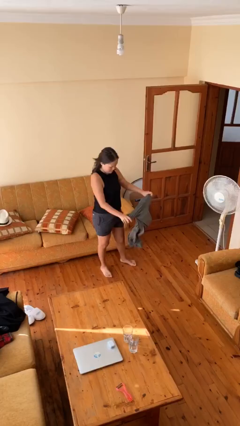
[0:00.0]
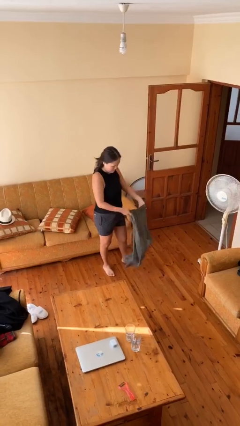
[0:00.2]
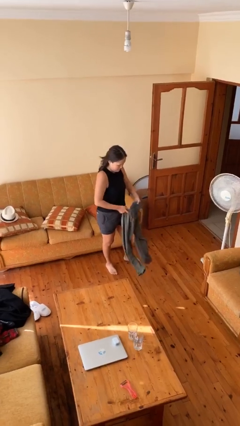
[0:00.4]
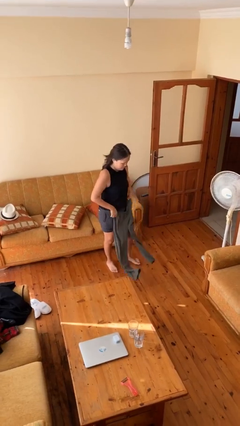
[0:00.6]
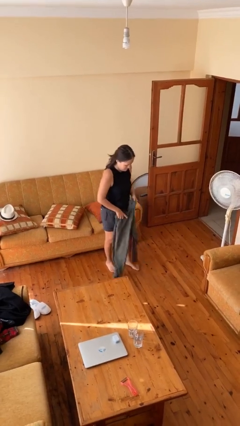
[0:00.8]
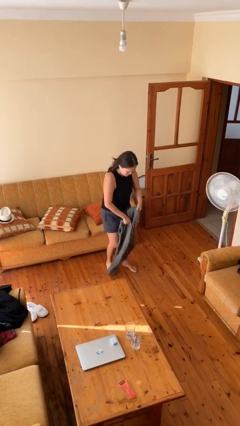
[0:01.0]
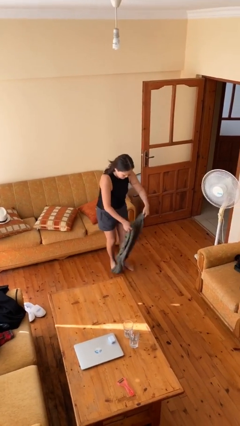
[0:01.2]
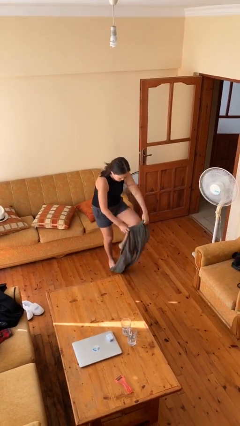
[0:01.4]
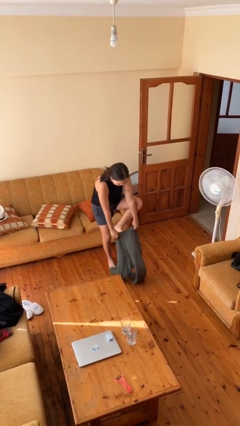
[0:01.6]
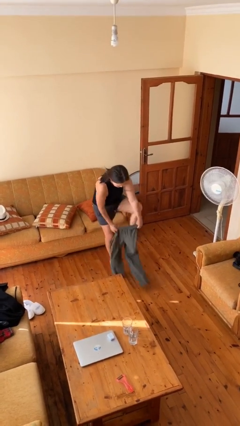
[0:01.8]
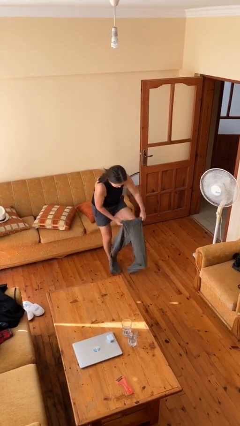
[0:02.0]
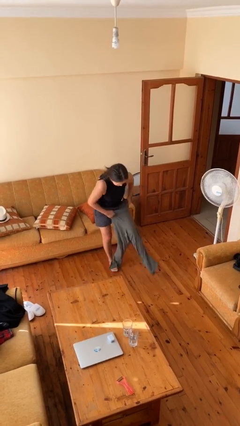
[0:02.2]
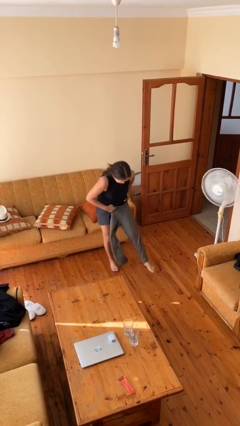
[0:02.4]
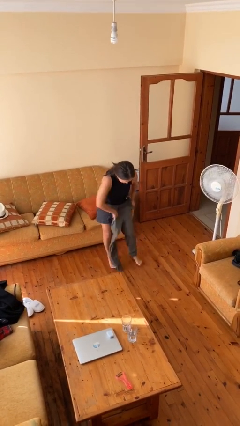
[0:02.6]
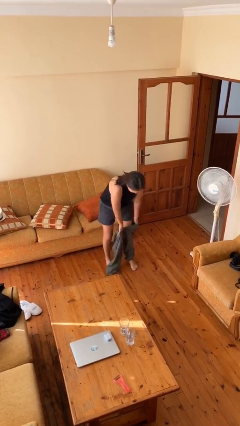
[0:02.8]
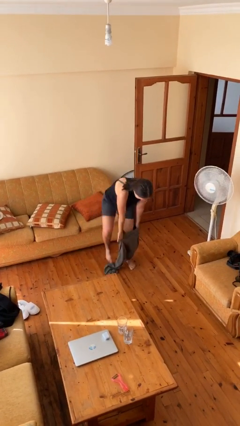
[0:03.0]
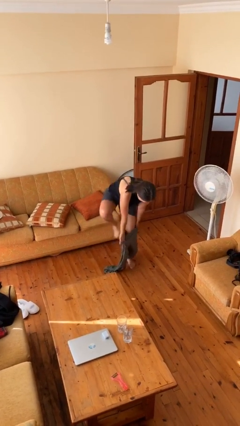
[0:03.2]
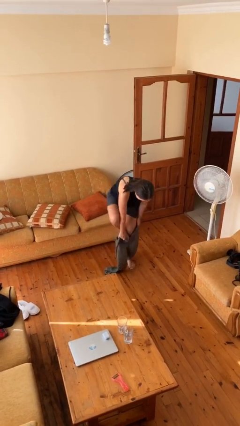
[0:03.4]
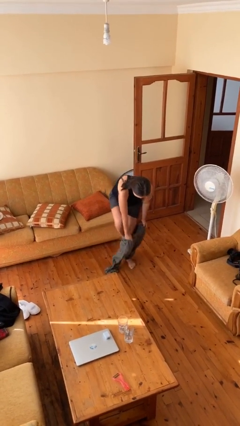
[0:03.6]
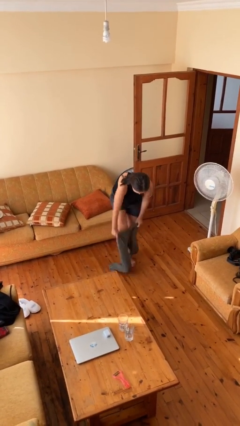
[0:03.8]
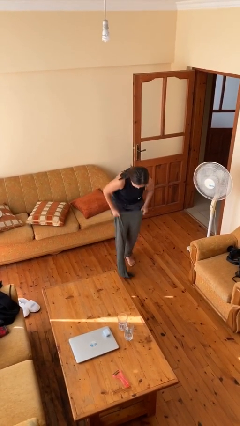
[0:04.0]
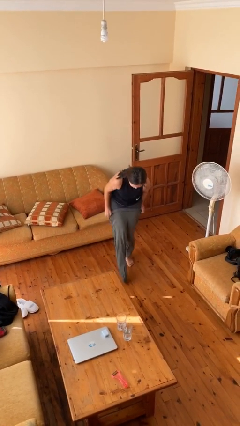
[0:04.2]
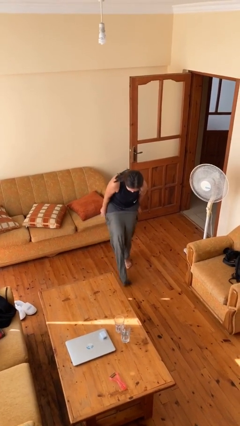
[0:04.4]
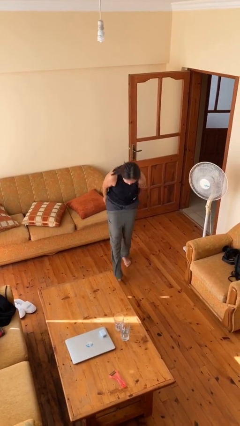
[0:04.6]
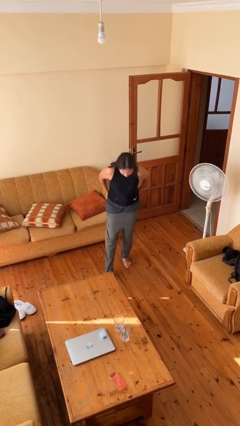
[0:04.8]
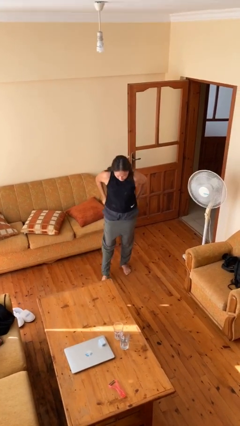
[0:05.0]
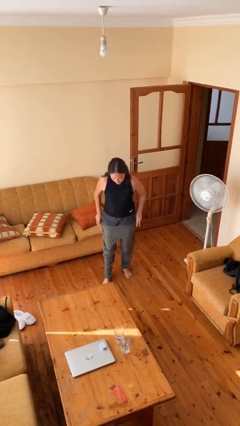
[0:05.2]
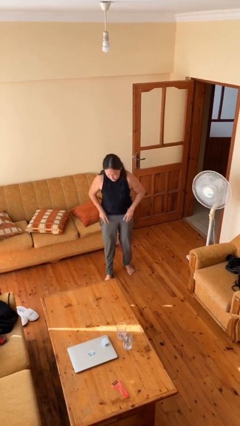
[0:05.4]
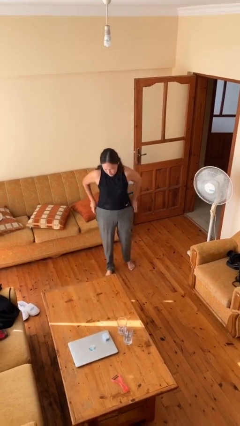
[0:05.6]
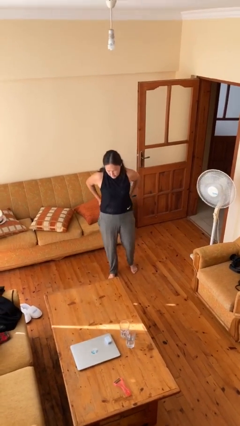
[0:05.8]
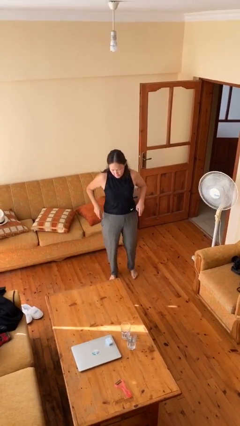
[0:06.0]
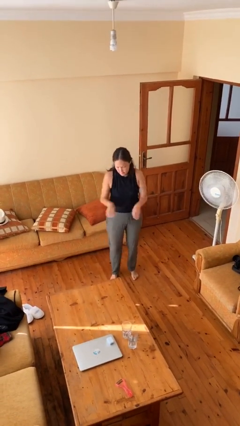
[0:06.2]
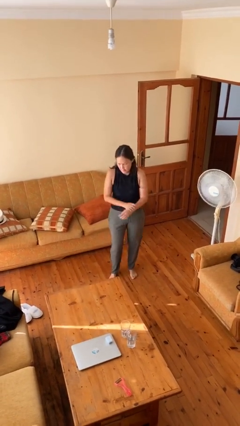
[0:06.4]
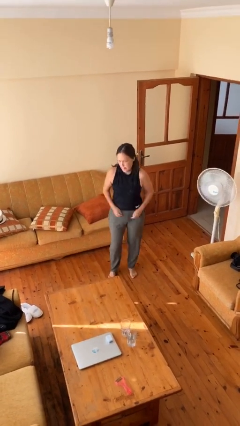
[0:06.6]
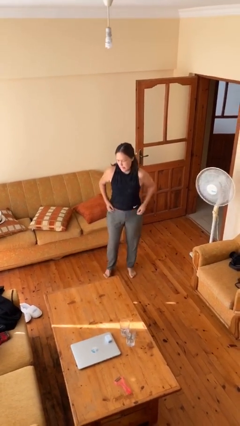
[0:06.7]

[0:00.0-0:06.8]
person puts on pants

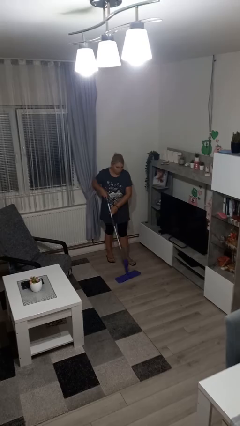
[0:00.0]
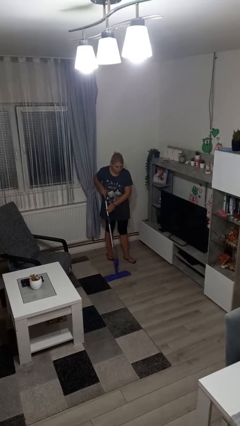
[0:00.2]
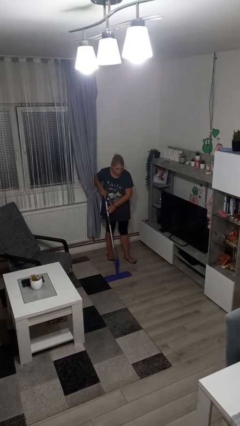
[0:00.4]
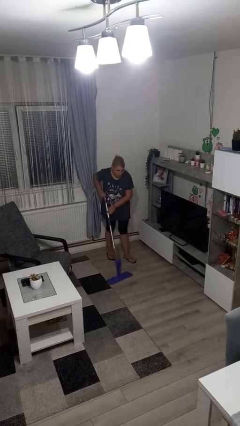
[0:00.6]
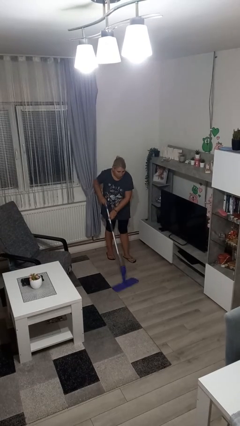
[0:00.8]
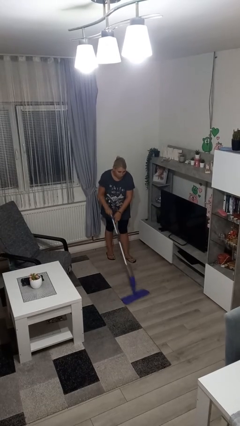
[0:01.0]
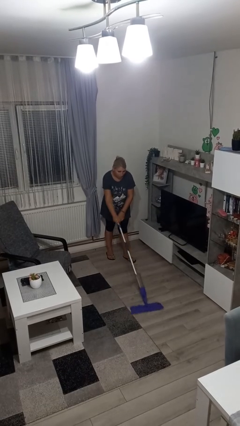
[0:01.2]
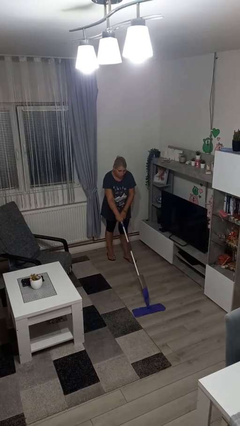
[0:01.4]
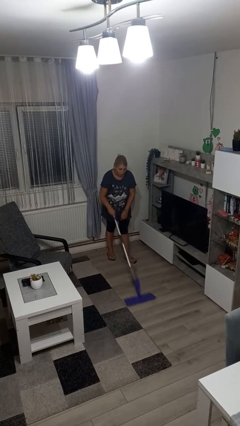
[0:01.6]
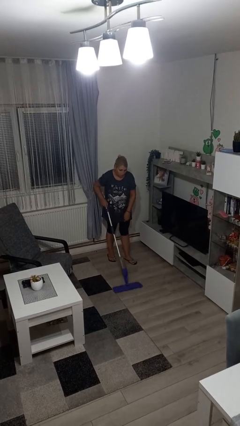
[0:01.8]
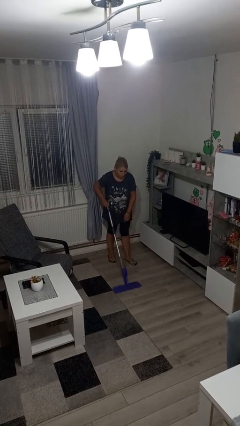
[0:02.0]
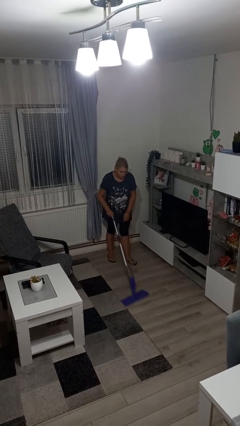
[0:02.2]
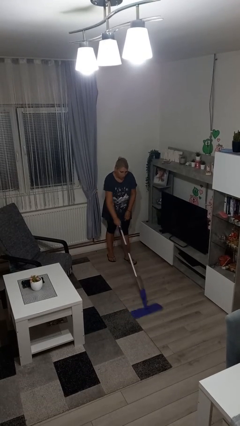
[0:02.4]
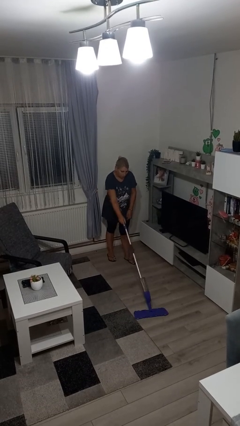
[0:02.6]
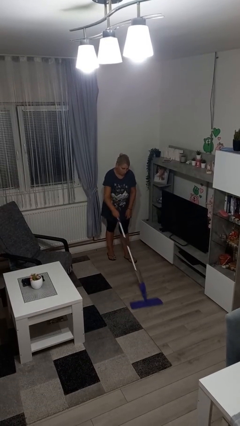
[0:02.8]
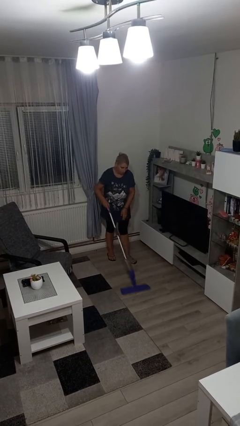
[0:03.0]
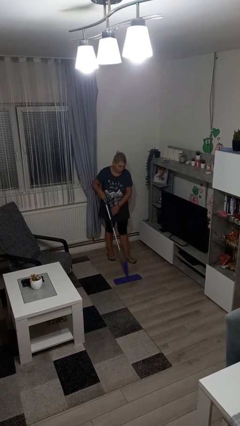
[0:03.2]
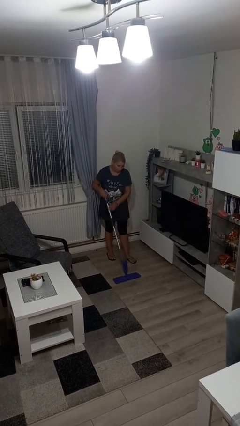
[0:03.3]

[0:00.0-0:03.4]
person mops

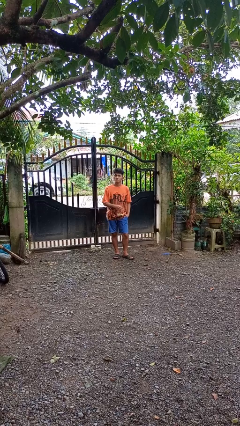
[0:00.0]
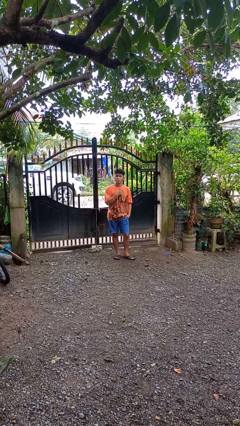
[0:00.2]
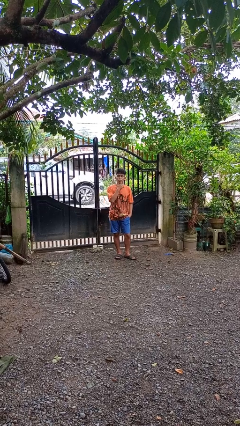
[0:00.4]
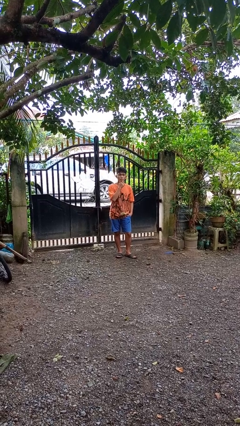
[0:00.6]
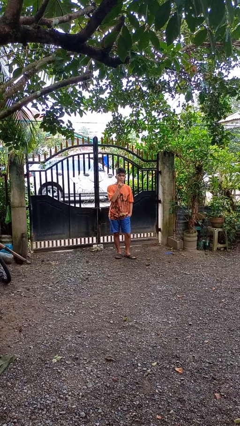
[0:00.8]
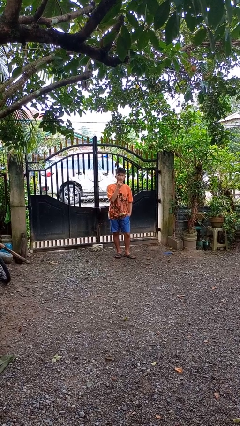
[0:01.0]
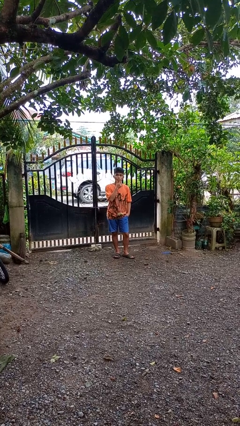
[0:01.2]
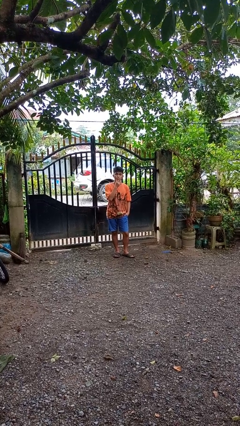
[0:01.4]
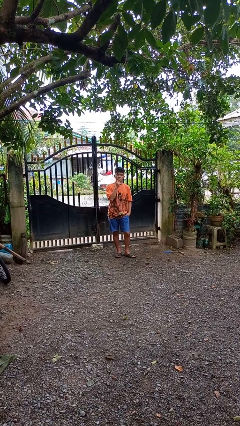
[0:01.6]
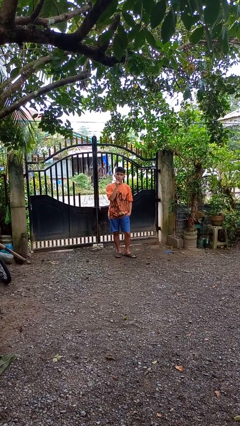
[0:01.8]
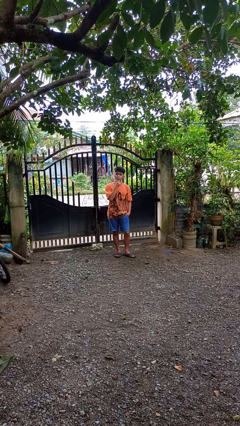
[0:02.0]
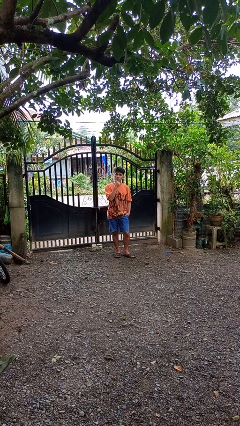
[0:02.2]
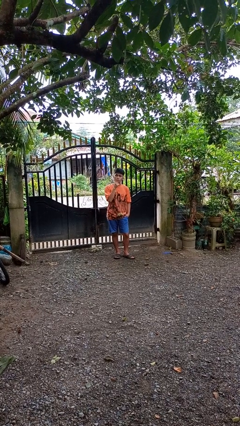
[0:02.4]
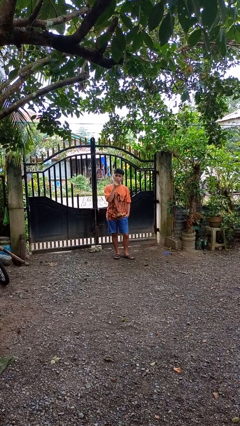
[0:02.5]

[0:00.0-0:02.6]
person strokes chin

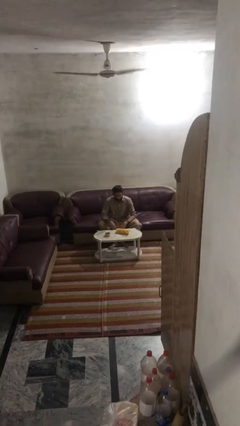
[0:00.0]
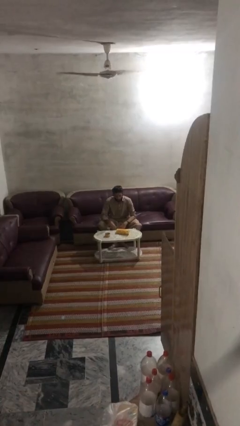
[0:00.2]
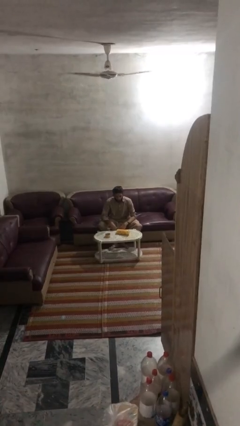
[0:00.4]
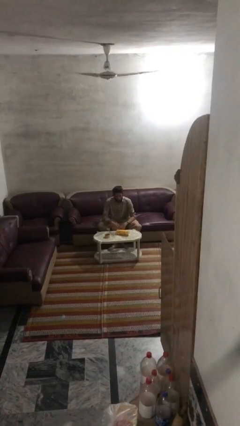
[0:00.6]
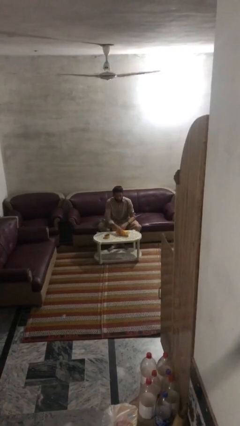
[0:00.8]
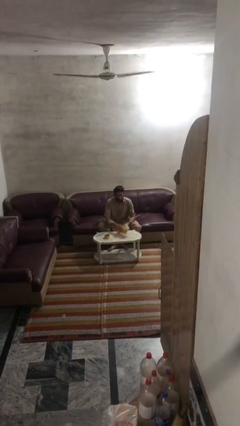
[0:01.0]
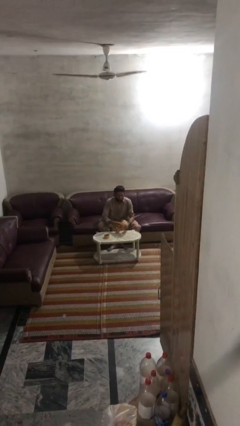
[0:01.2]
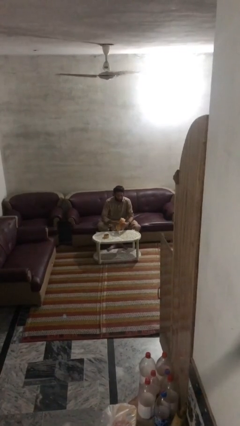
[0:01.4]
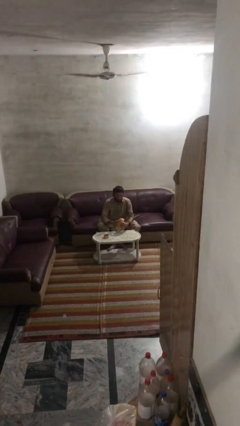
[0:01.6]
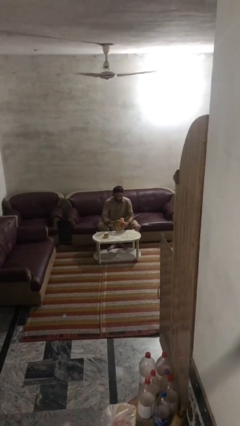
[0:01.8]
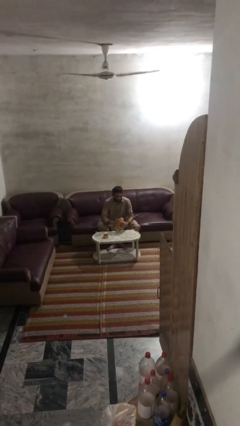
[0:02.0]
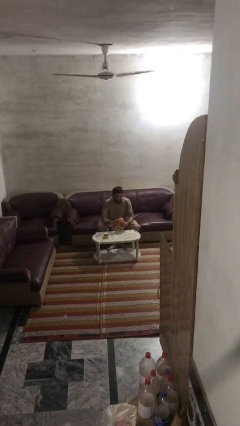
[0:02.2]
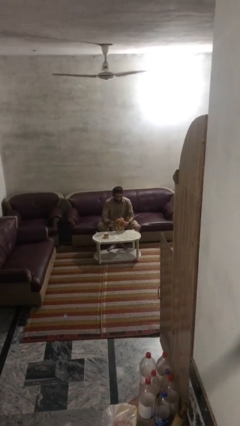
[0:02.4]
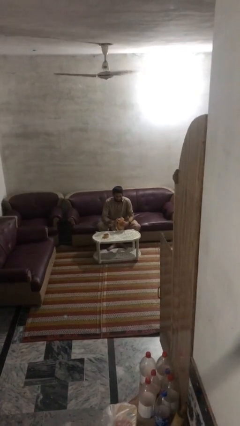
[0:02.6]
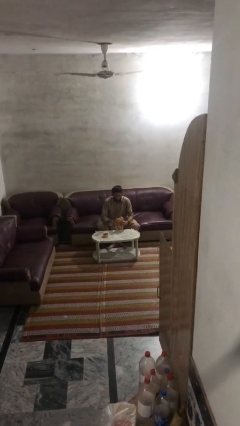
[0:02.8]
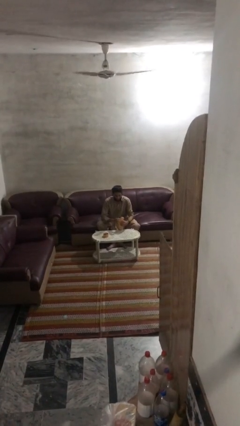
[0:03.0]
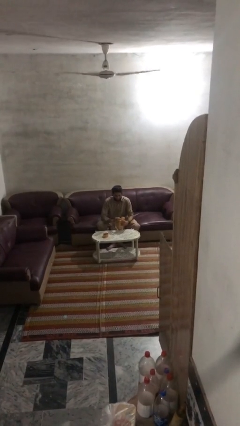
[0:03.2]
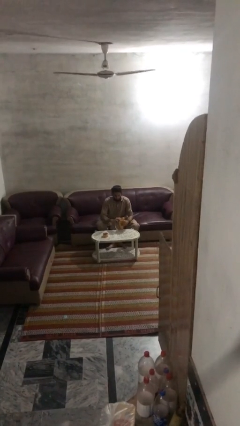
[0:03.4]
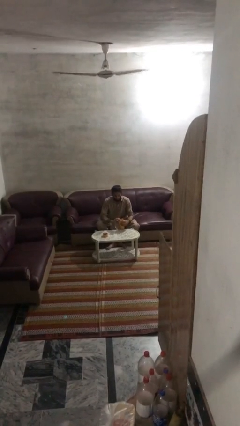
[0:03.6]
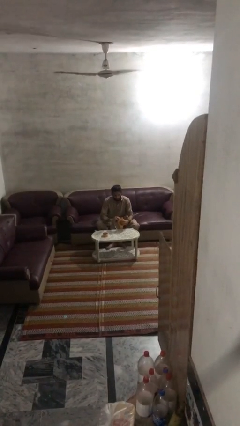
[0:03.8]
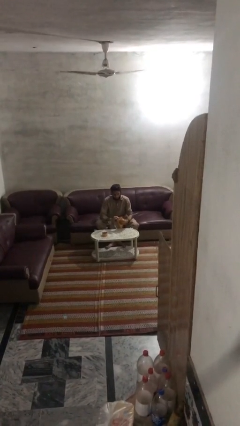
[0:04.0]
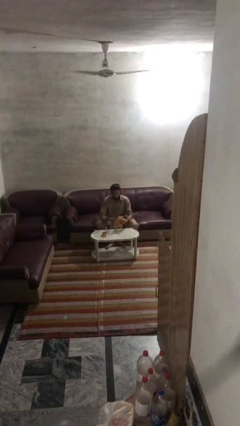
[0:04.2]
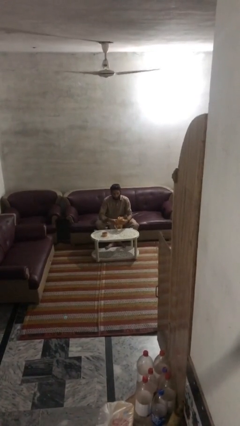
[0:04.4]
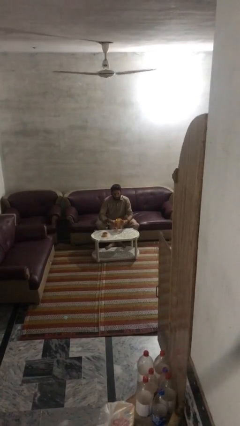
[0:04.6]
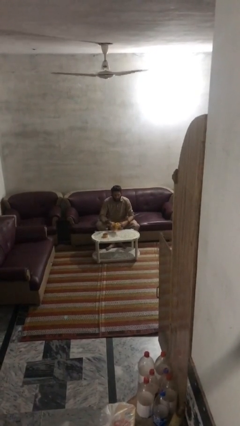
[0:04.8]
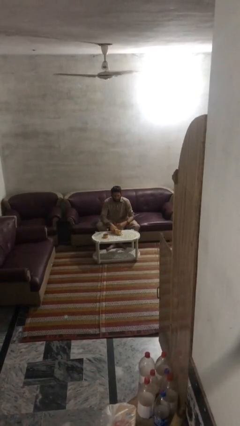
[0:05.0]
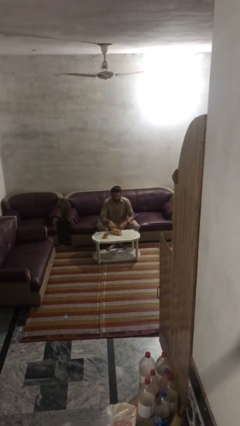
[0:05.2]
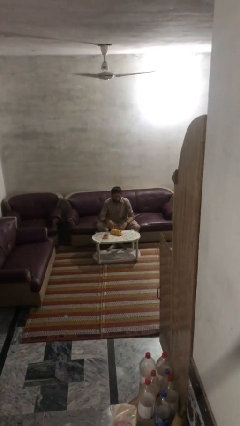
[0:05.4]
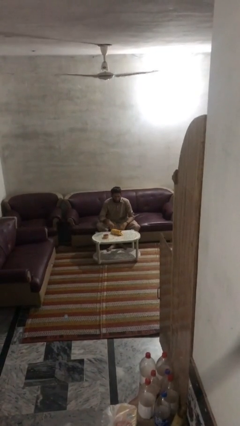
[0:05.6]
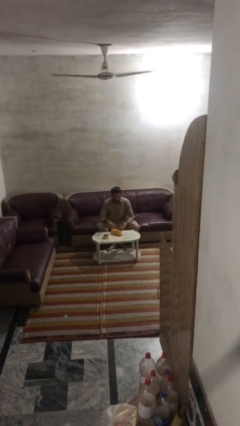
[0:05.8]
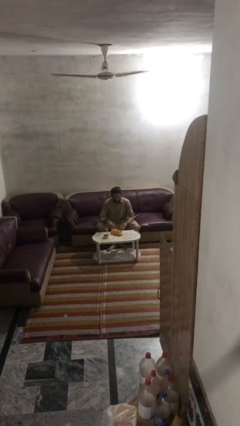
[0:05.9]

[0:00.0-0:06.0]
person wraps box
